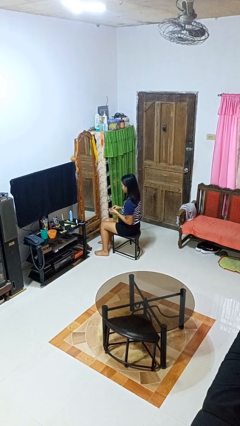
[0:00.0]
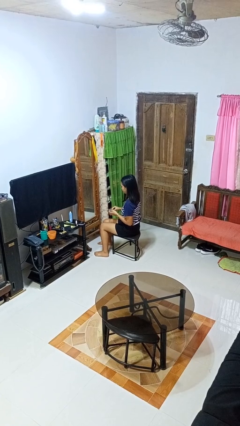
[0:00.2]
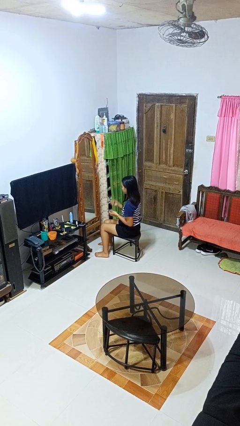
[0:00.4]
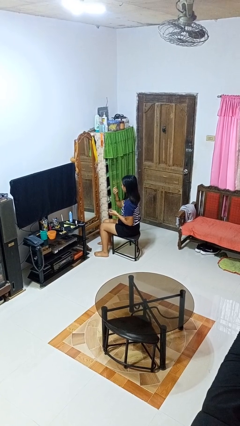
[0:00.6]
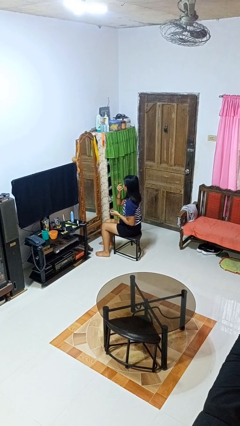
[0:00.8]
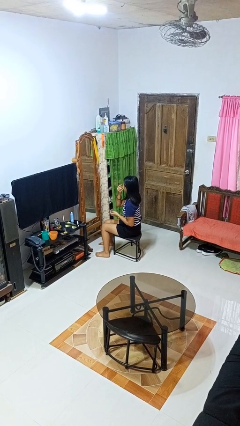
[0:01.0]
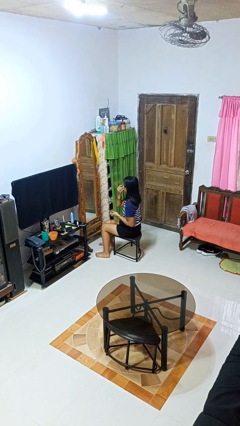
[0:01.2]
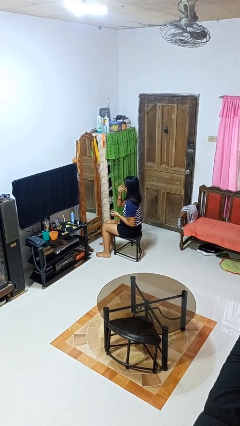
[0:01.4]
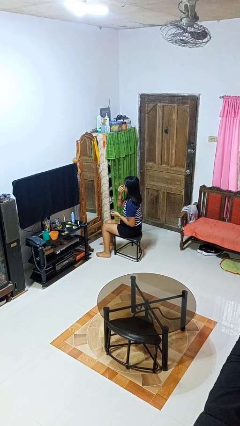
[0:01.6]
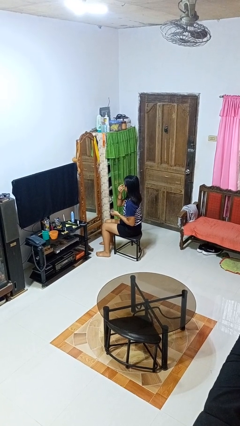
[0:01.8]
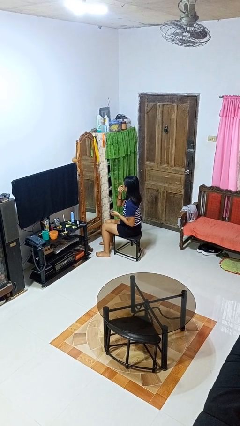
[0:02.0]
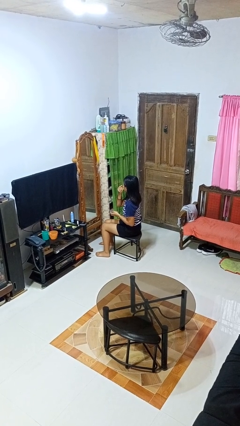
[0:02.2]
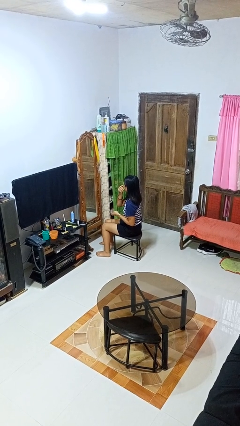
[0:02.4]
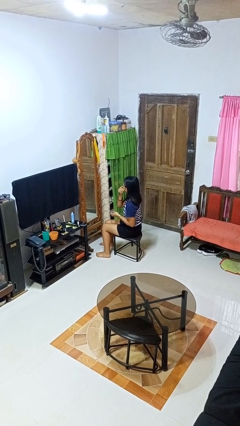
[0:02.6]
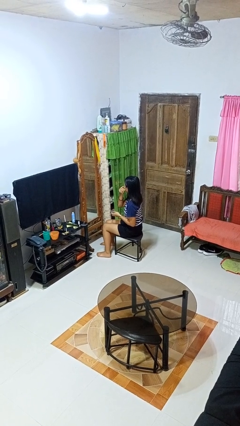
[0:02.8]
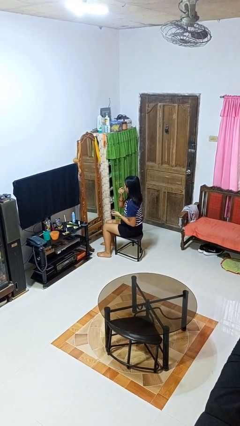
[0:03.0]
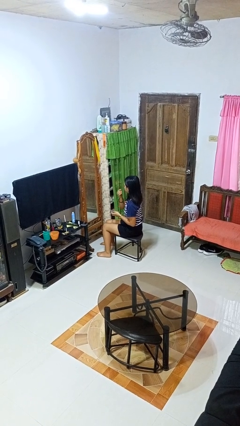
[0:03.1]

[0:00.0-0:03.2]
person applies eye makeup

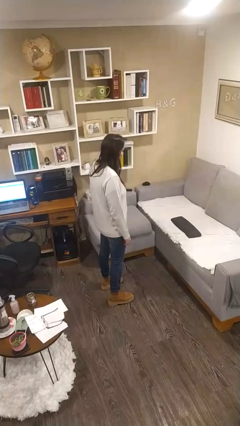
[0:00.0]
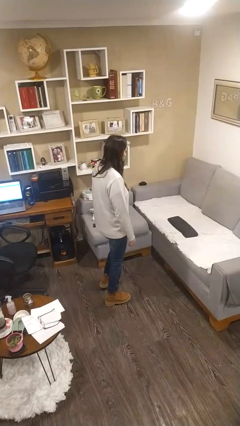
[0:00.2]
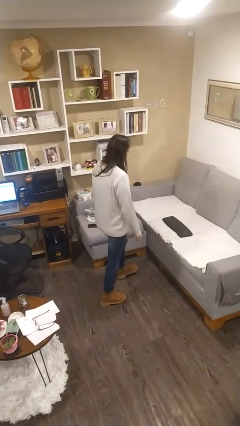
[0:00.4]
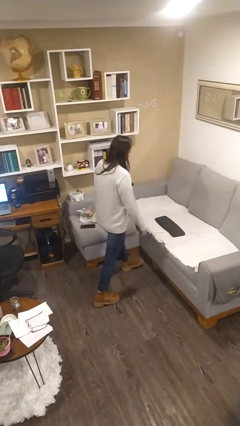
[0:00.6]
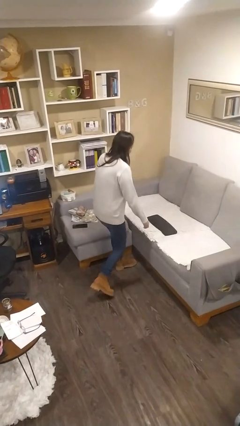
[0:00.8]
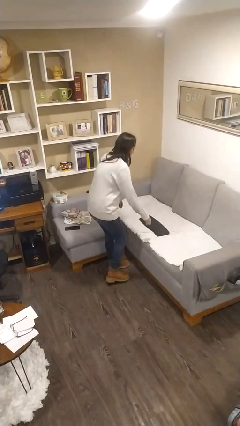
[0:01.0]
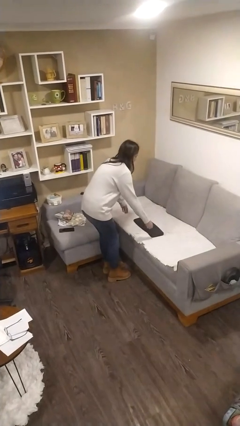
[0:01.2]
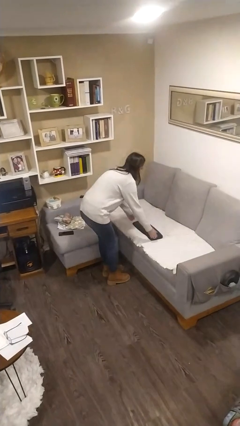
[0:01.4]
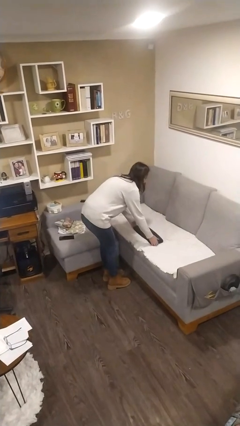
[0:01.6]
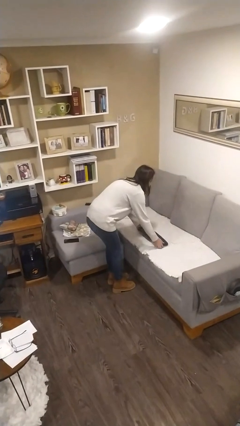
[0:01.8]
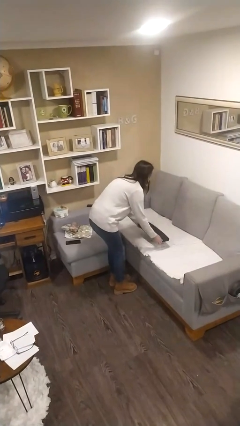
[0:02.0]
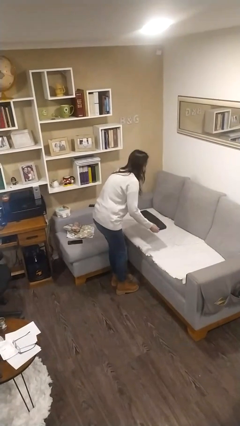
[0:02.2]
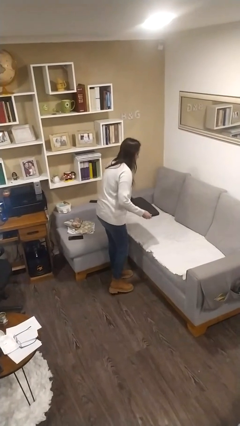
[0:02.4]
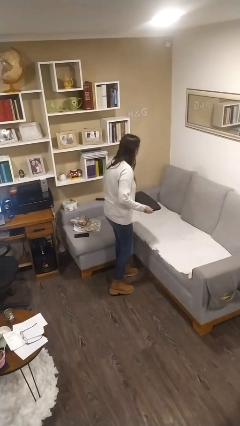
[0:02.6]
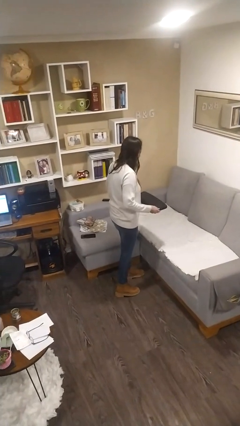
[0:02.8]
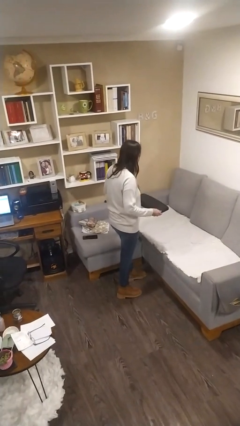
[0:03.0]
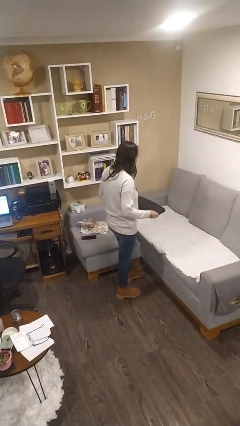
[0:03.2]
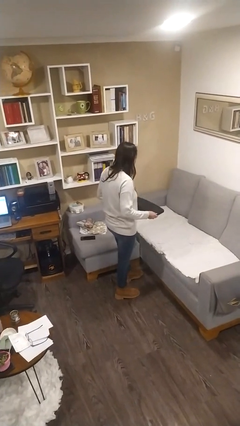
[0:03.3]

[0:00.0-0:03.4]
person picks up object from couch

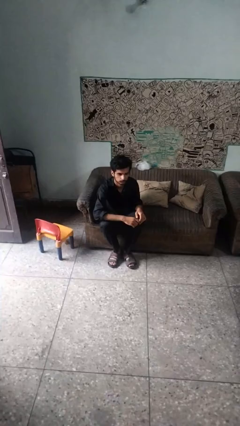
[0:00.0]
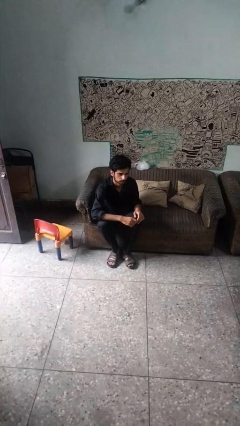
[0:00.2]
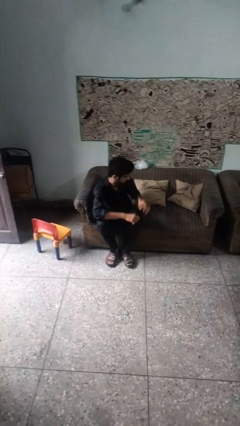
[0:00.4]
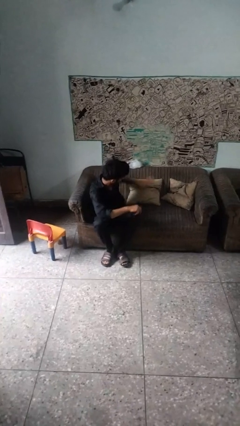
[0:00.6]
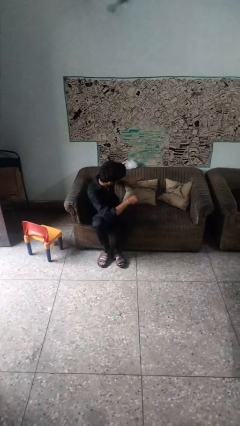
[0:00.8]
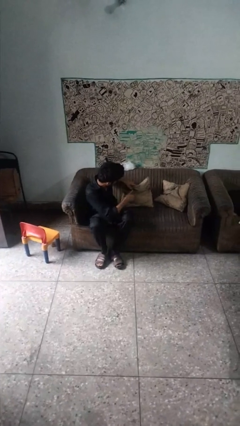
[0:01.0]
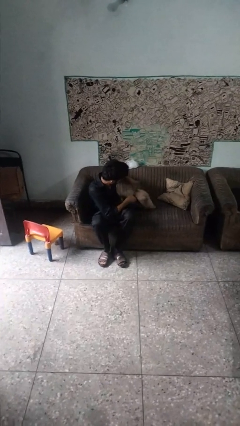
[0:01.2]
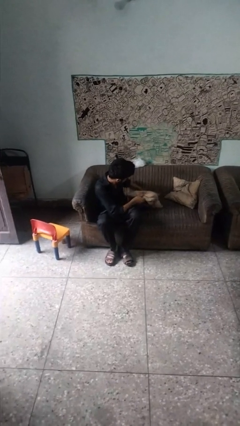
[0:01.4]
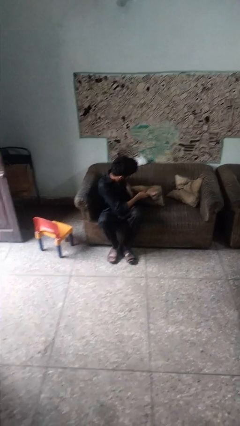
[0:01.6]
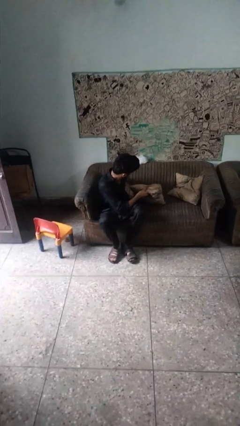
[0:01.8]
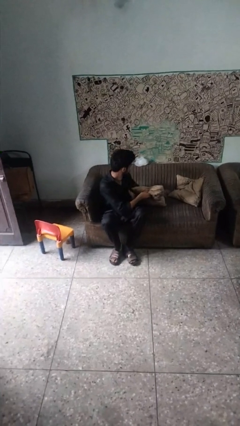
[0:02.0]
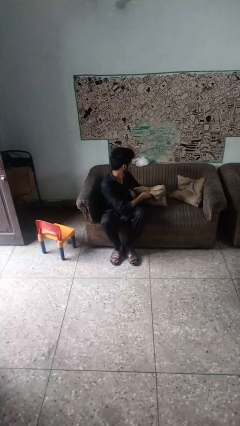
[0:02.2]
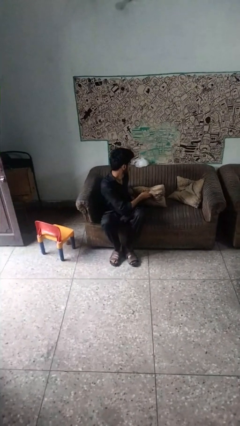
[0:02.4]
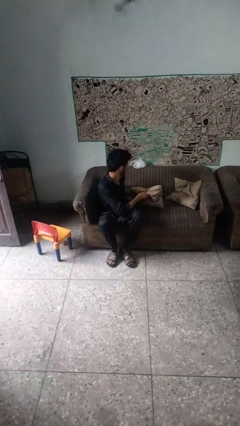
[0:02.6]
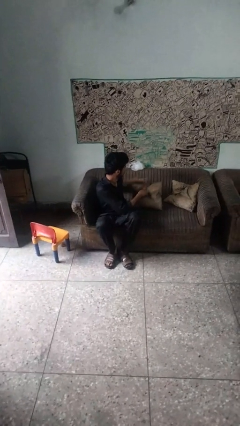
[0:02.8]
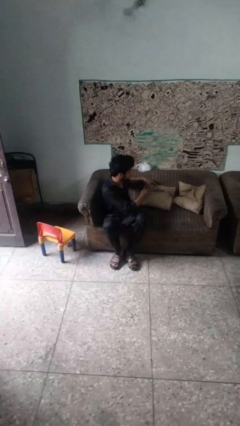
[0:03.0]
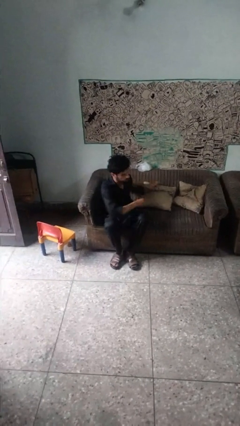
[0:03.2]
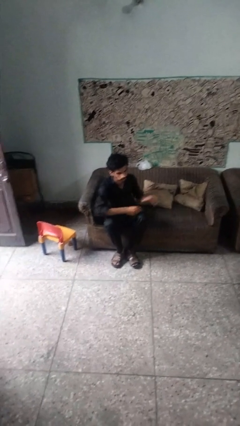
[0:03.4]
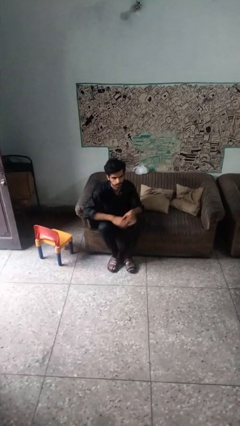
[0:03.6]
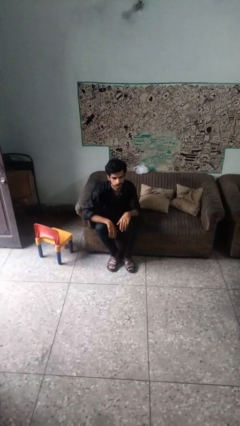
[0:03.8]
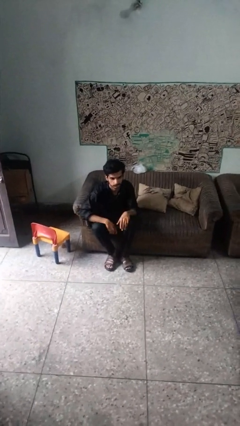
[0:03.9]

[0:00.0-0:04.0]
person searches in couch

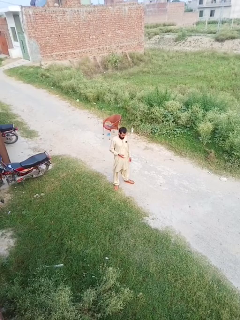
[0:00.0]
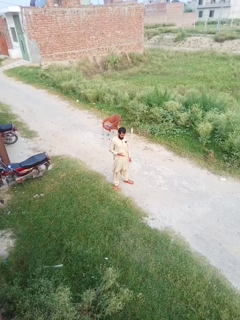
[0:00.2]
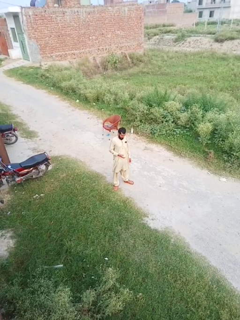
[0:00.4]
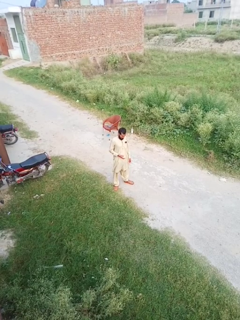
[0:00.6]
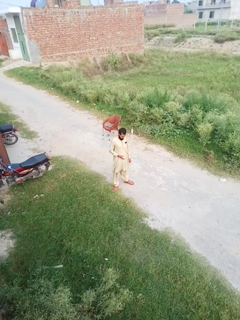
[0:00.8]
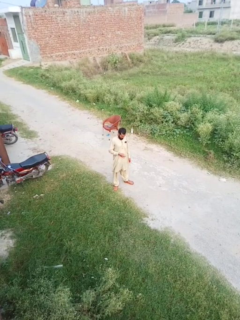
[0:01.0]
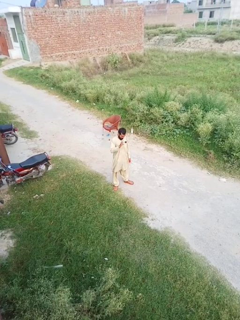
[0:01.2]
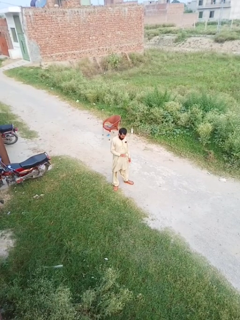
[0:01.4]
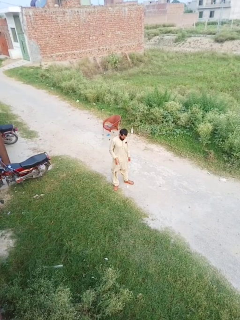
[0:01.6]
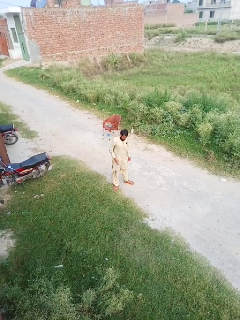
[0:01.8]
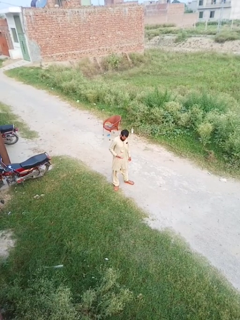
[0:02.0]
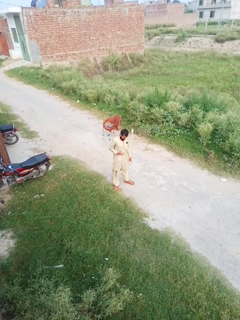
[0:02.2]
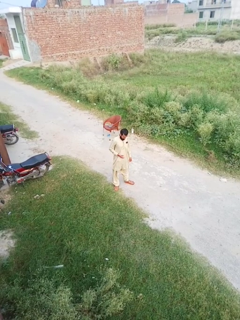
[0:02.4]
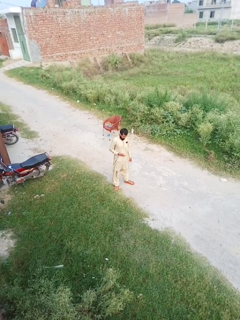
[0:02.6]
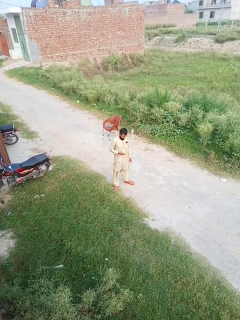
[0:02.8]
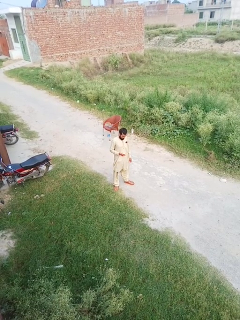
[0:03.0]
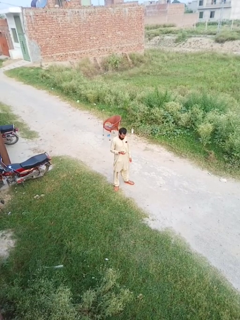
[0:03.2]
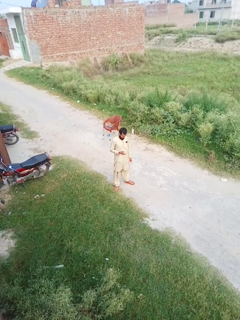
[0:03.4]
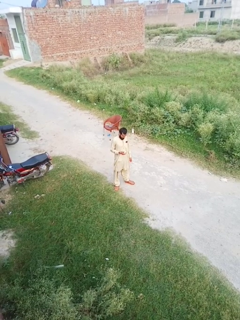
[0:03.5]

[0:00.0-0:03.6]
person bounces ball on floor

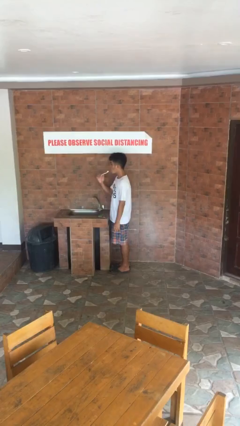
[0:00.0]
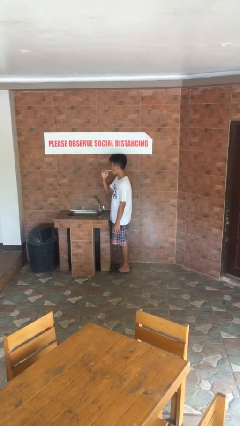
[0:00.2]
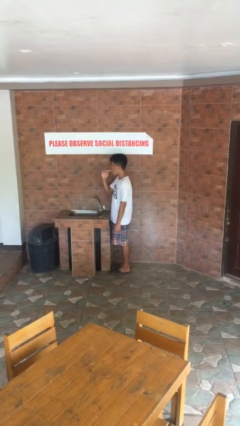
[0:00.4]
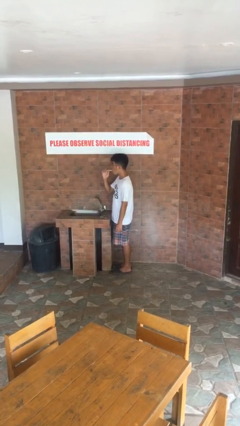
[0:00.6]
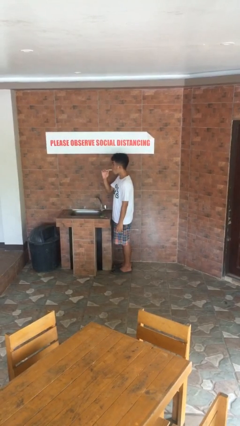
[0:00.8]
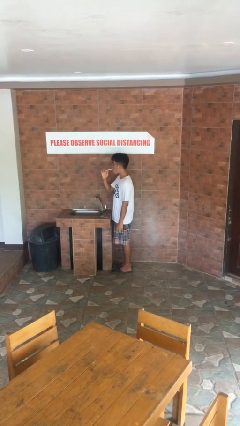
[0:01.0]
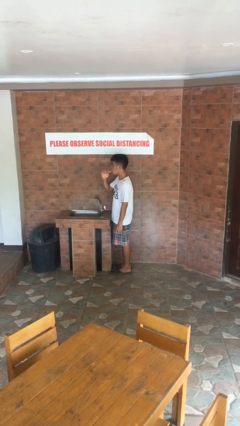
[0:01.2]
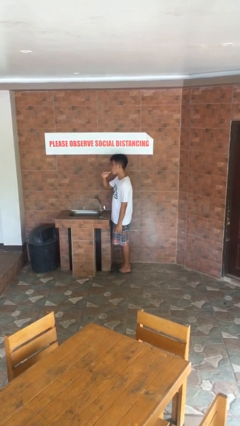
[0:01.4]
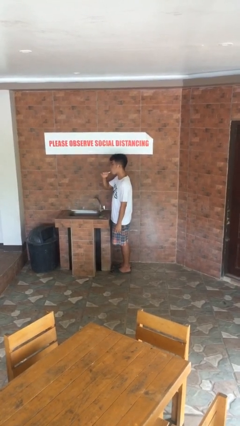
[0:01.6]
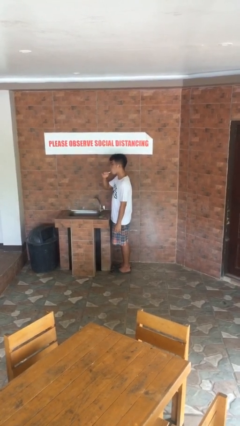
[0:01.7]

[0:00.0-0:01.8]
person brushes teeth

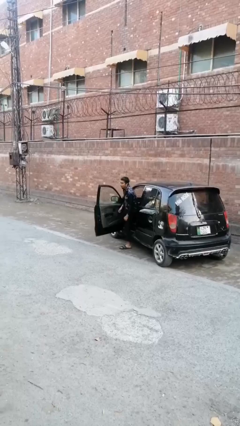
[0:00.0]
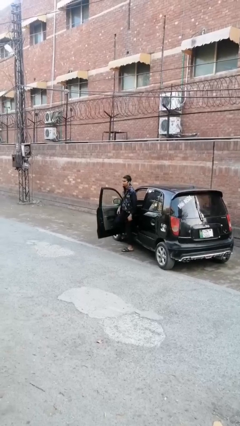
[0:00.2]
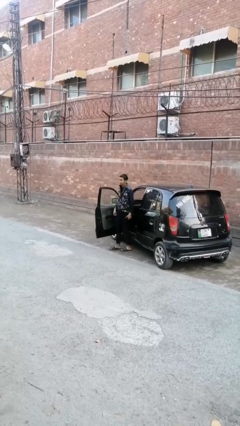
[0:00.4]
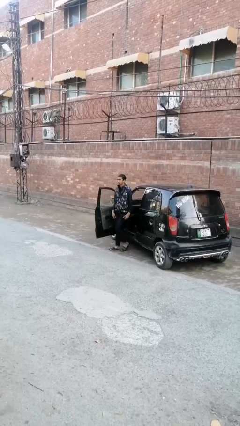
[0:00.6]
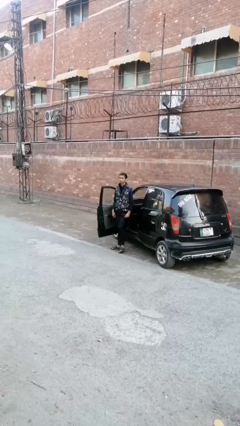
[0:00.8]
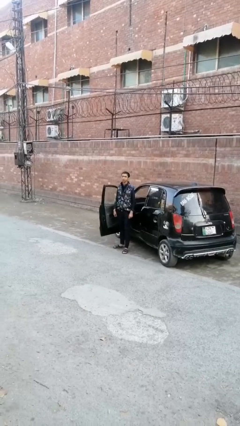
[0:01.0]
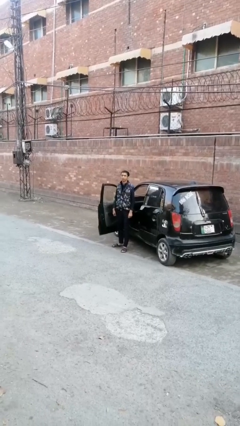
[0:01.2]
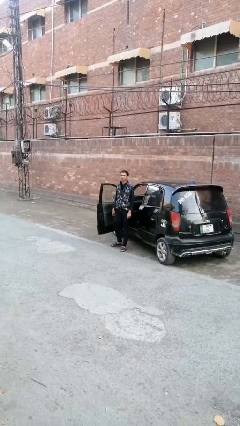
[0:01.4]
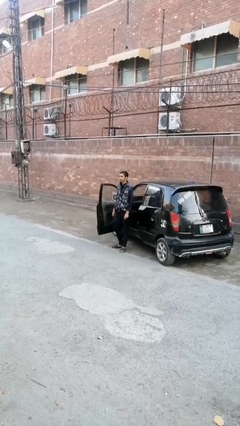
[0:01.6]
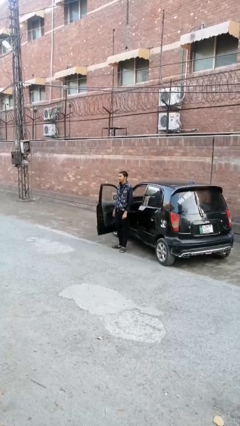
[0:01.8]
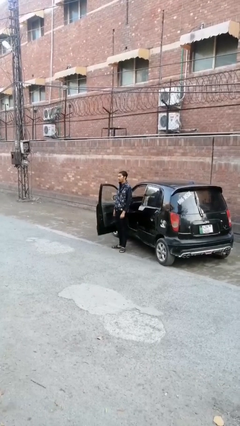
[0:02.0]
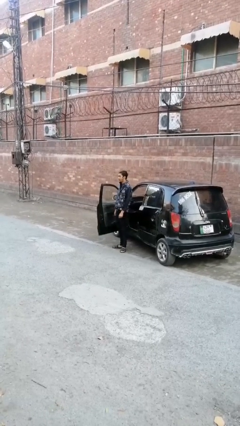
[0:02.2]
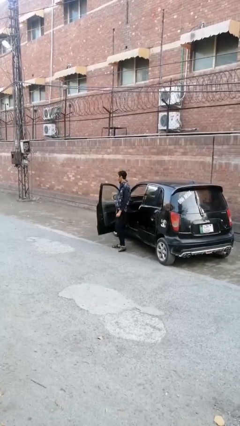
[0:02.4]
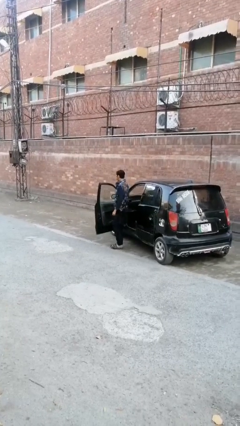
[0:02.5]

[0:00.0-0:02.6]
person exits car
